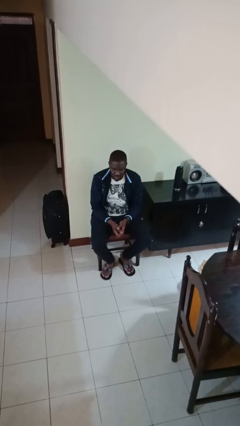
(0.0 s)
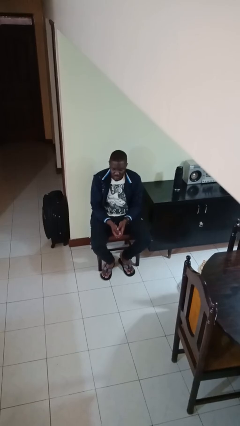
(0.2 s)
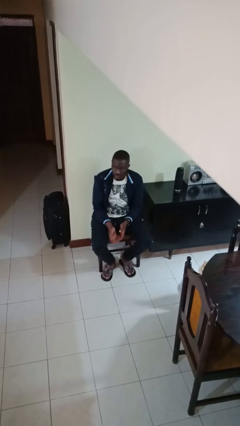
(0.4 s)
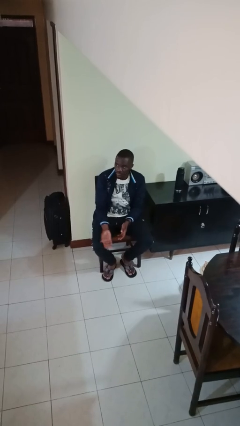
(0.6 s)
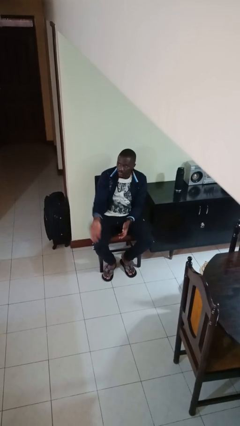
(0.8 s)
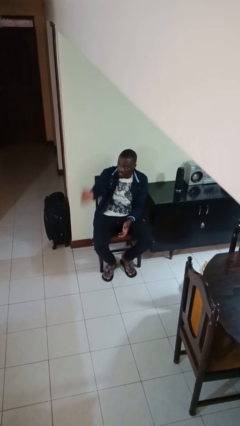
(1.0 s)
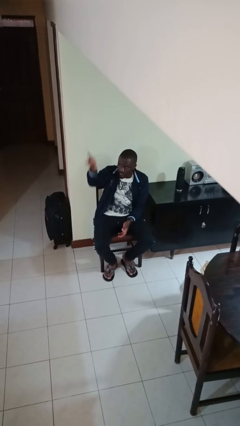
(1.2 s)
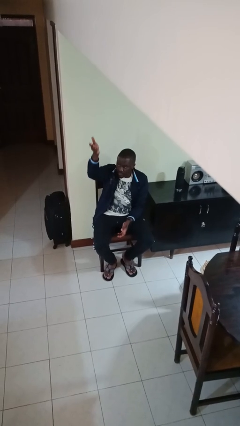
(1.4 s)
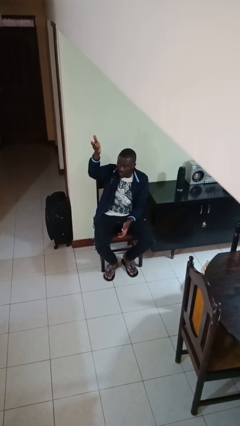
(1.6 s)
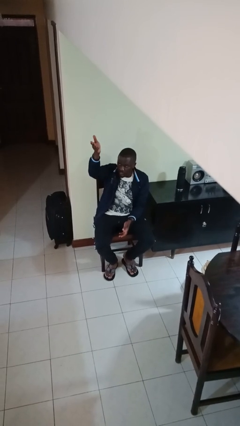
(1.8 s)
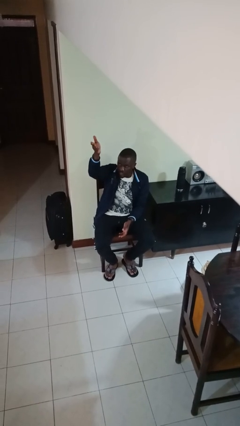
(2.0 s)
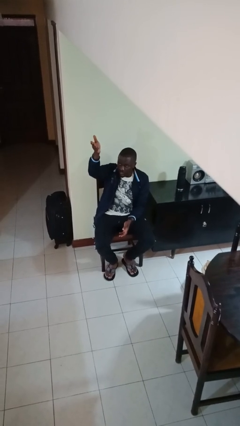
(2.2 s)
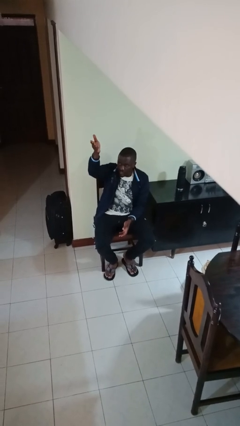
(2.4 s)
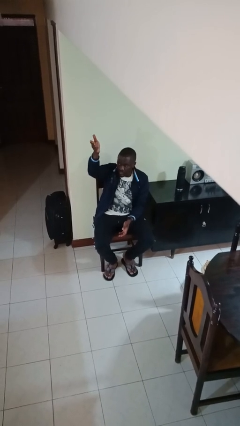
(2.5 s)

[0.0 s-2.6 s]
person gestures swipe up

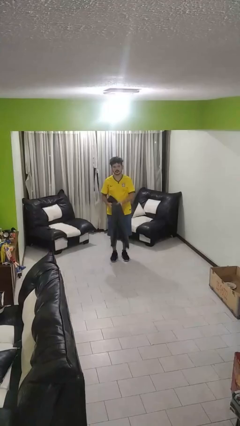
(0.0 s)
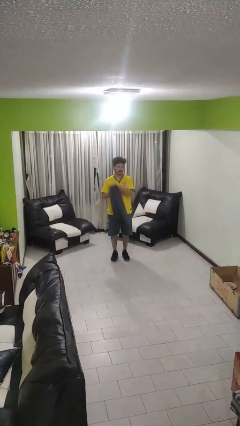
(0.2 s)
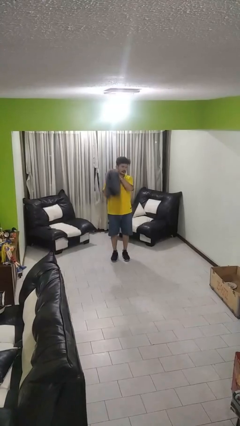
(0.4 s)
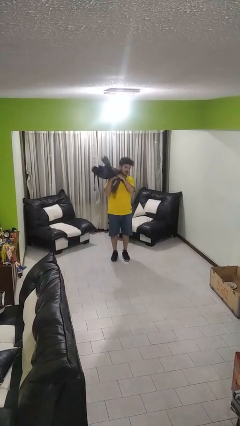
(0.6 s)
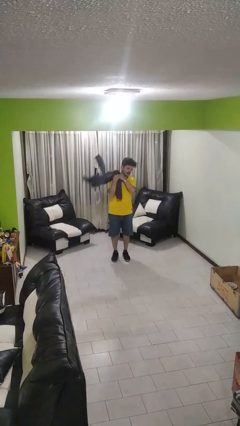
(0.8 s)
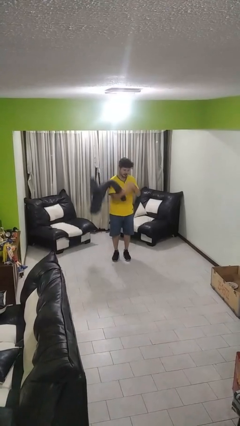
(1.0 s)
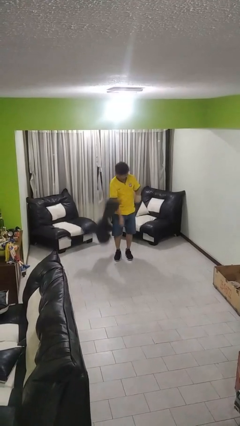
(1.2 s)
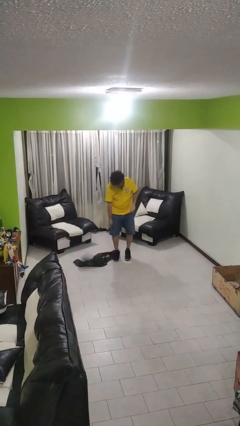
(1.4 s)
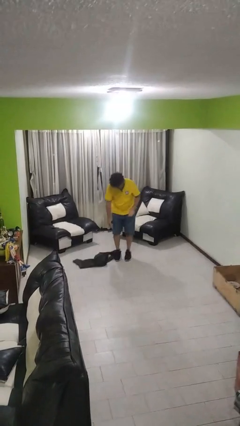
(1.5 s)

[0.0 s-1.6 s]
person drops object

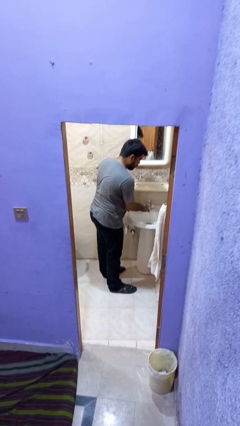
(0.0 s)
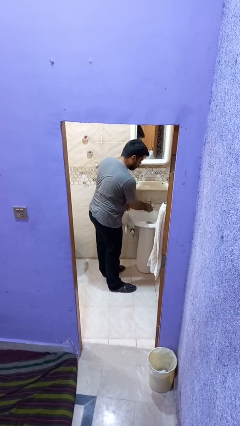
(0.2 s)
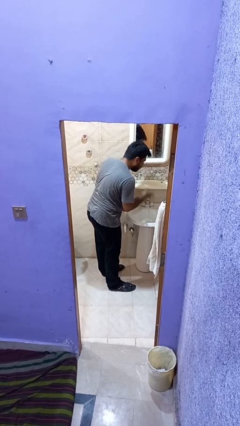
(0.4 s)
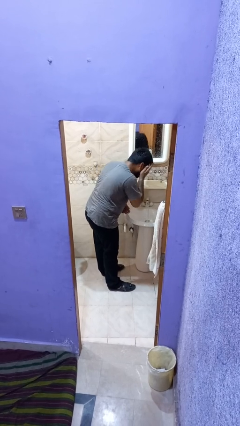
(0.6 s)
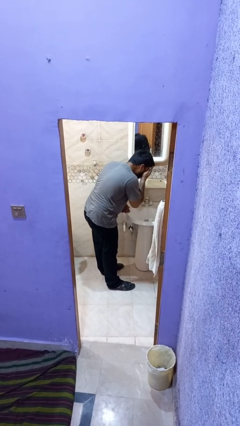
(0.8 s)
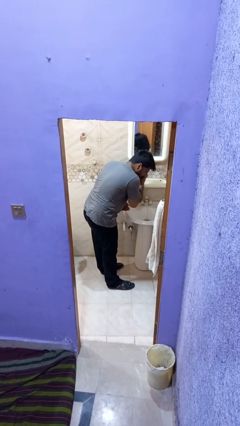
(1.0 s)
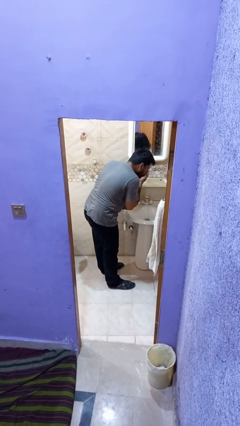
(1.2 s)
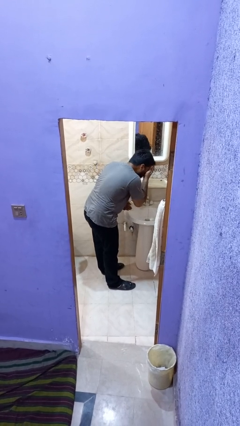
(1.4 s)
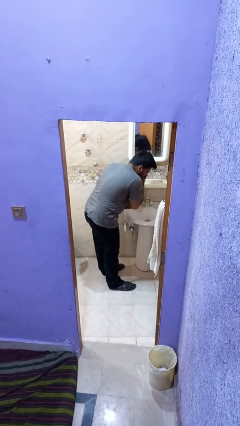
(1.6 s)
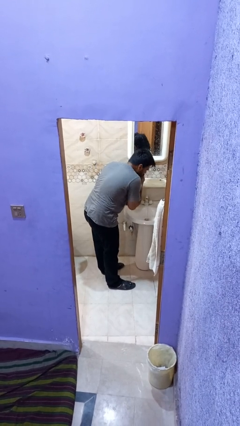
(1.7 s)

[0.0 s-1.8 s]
person washes face

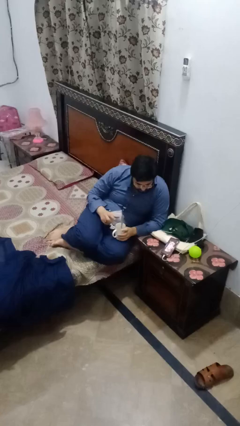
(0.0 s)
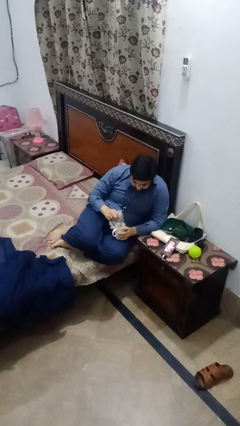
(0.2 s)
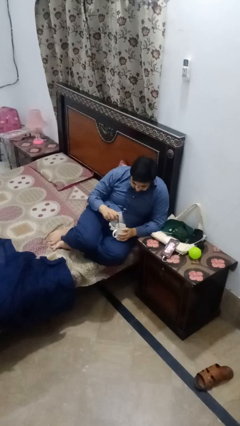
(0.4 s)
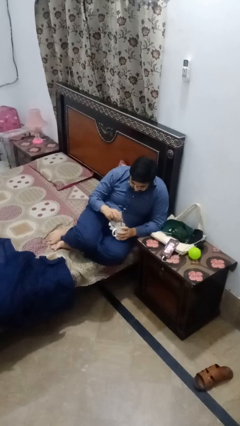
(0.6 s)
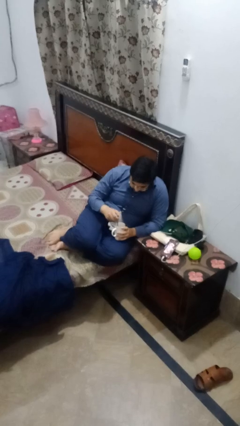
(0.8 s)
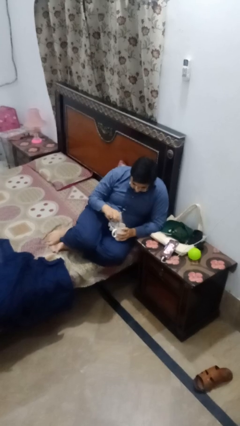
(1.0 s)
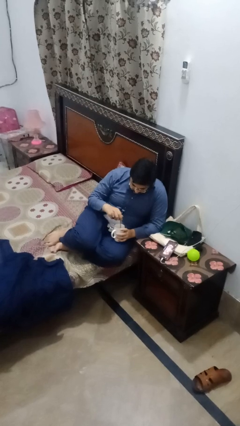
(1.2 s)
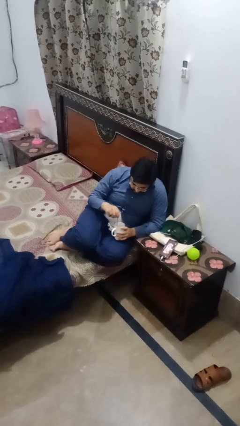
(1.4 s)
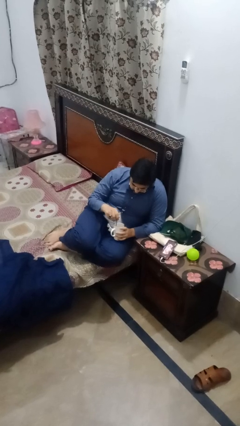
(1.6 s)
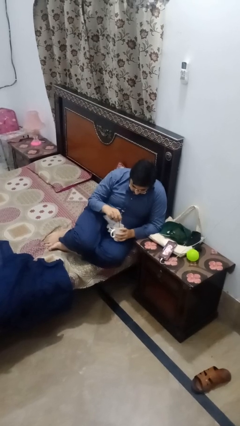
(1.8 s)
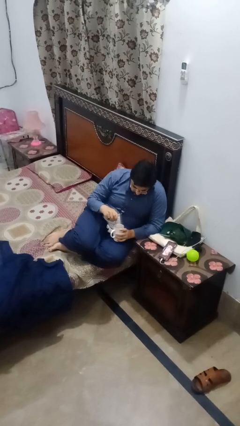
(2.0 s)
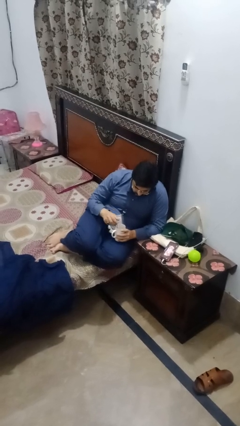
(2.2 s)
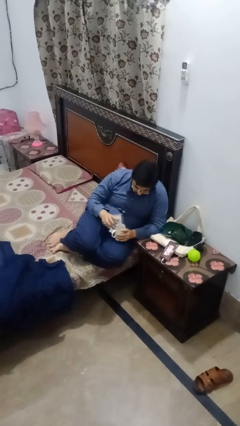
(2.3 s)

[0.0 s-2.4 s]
person stirs mug

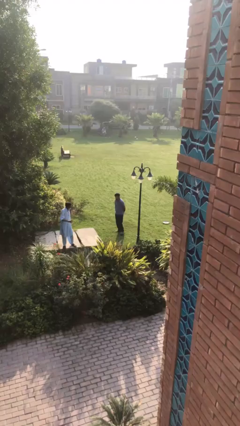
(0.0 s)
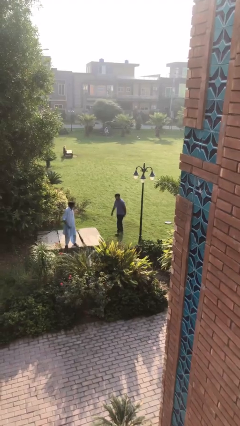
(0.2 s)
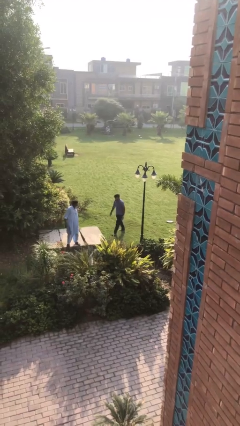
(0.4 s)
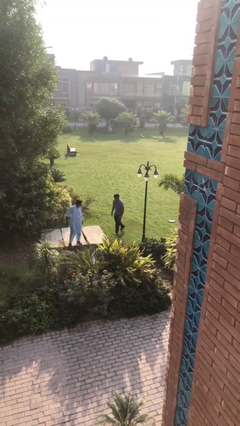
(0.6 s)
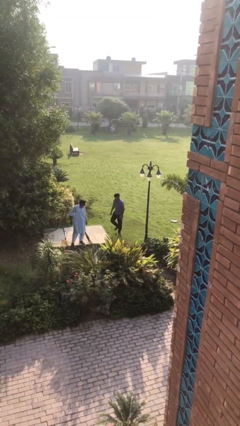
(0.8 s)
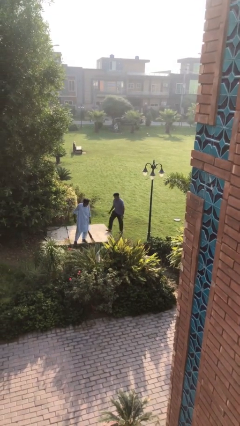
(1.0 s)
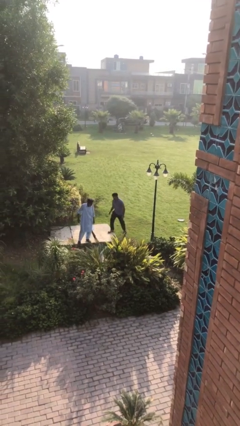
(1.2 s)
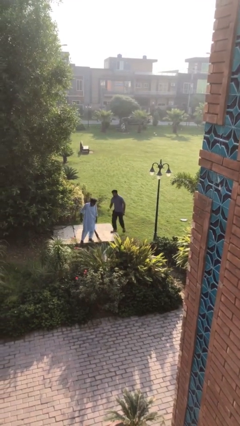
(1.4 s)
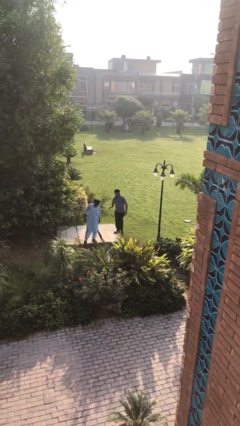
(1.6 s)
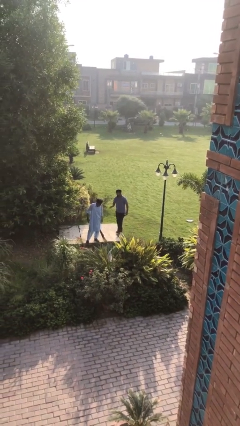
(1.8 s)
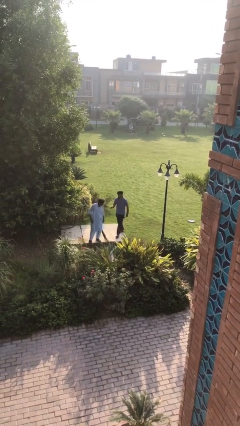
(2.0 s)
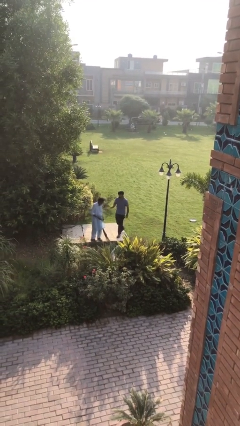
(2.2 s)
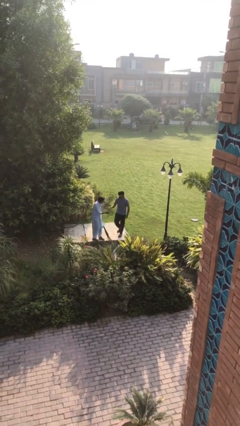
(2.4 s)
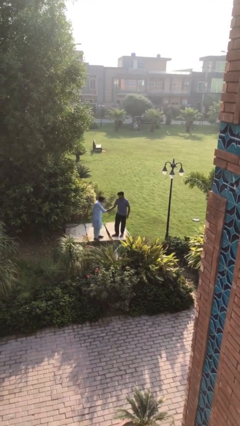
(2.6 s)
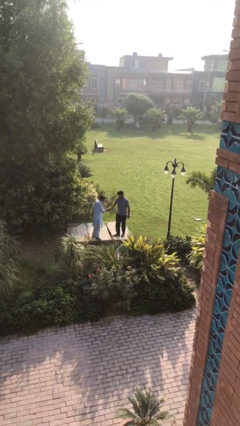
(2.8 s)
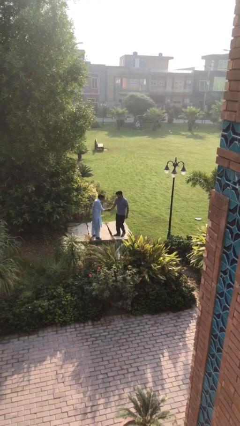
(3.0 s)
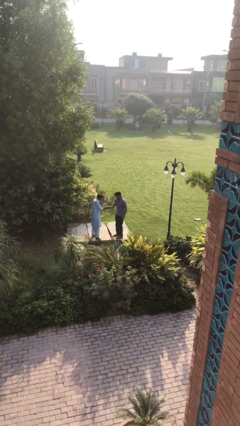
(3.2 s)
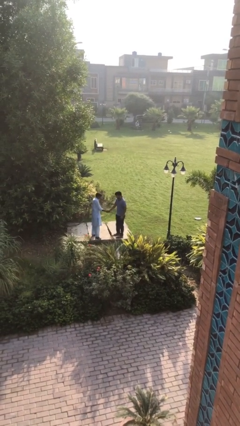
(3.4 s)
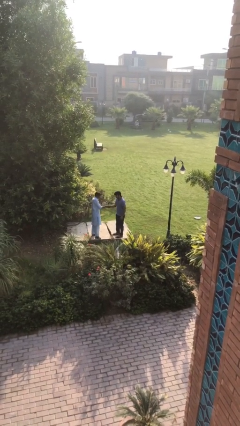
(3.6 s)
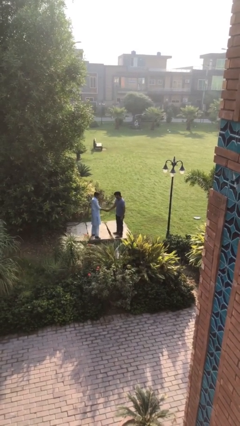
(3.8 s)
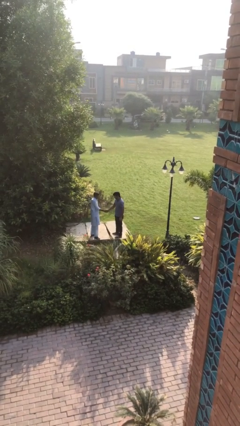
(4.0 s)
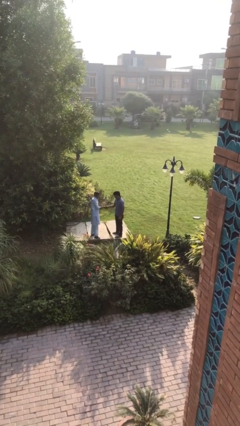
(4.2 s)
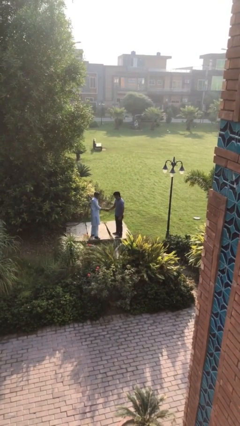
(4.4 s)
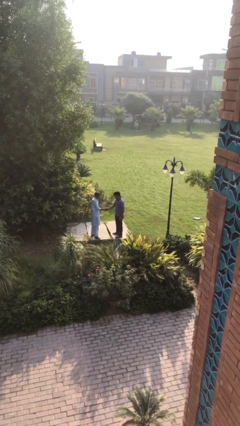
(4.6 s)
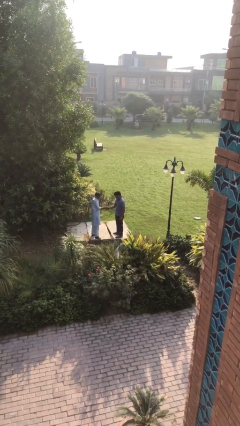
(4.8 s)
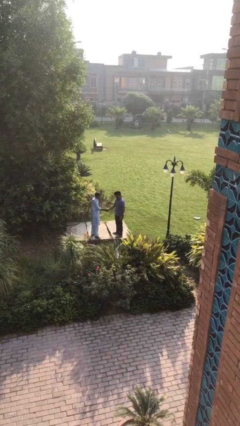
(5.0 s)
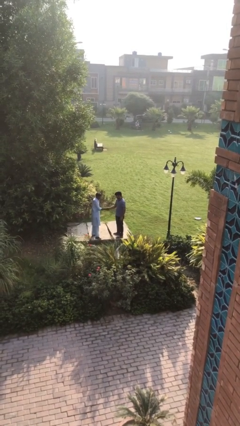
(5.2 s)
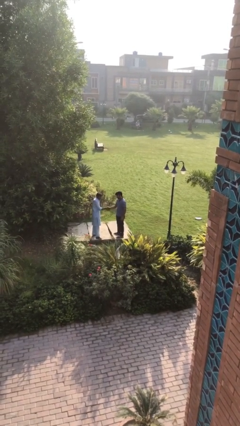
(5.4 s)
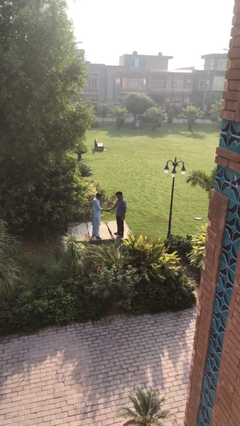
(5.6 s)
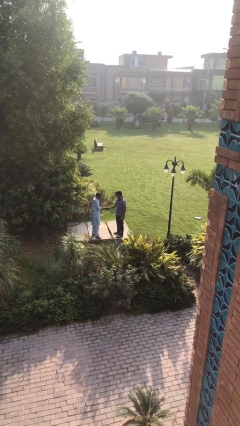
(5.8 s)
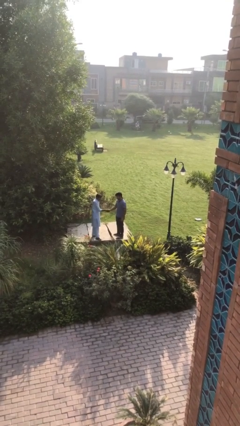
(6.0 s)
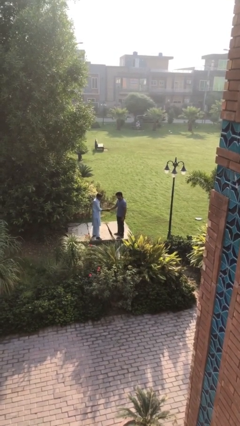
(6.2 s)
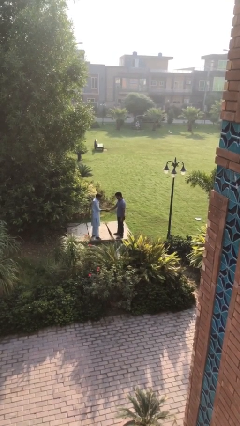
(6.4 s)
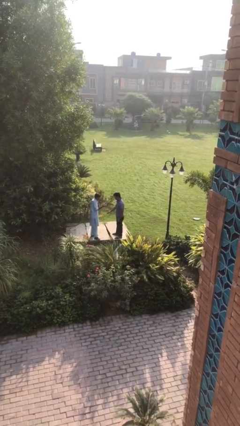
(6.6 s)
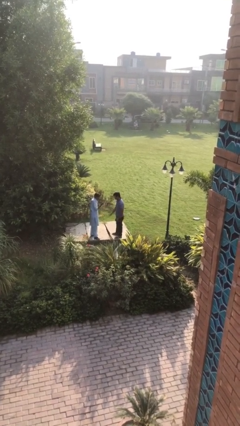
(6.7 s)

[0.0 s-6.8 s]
person shakes hand

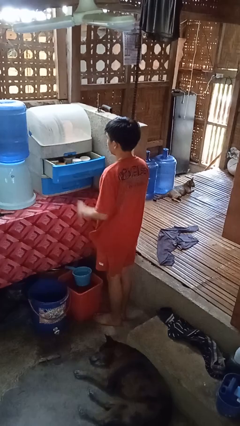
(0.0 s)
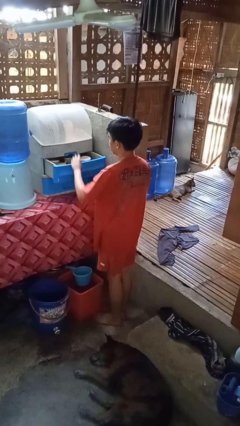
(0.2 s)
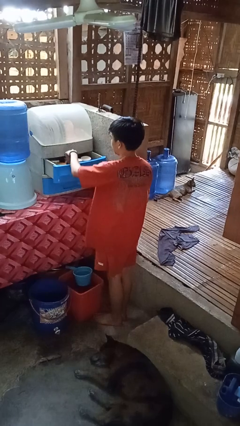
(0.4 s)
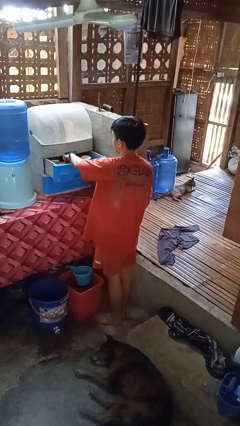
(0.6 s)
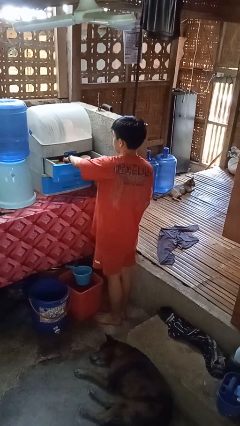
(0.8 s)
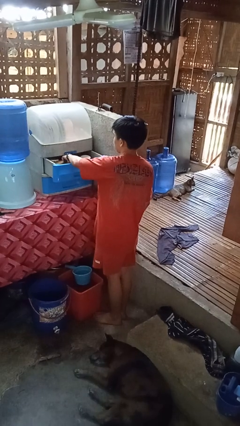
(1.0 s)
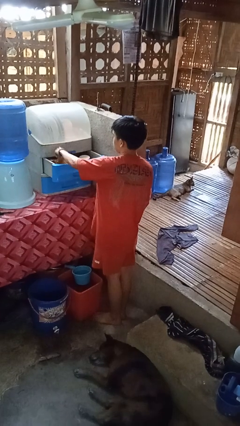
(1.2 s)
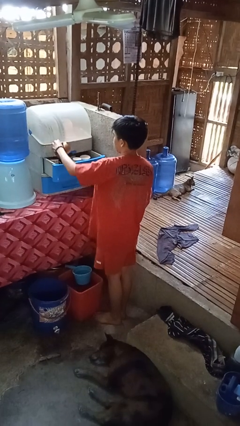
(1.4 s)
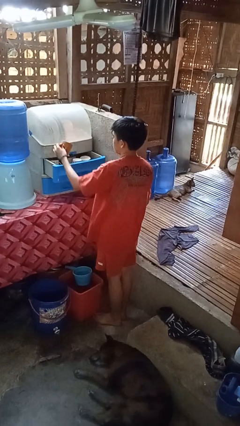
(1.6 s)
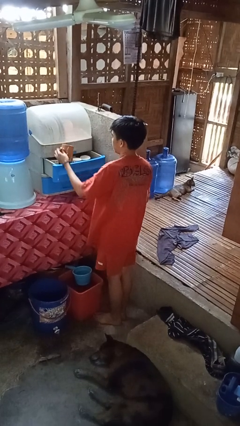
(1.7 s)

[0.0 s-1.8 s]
person picks up object from cabinet

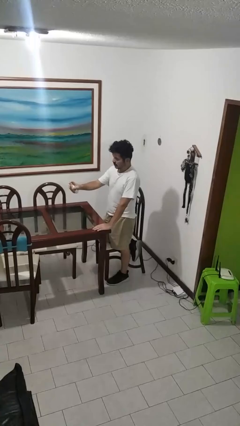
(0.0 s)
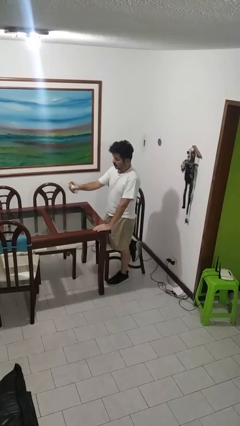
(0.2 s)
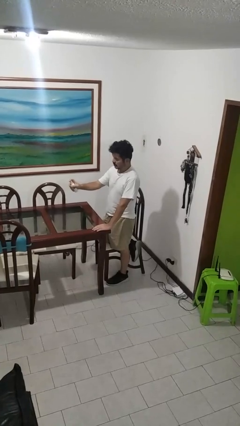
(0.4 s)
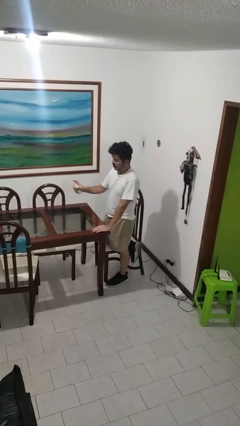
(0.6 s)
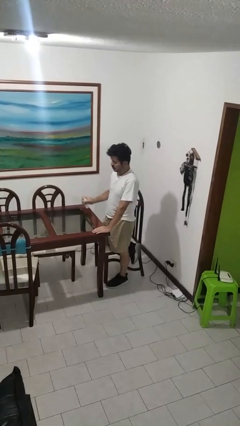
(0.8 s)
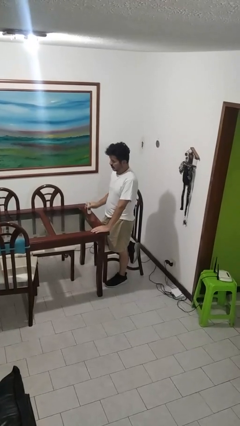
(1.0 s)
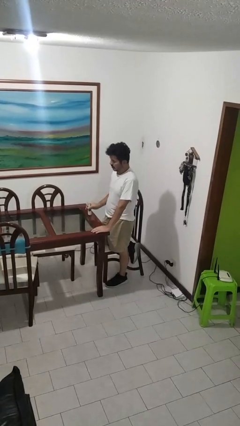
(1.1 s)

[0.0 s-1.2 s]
person sprays from bottle
